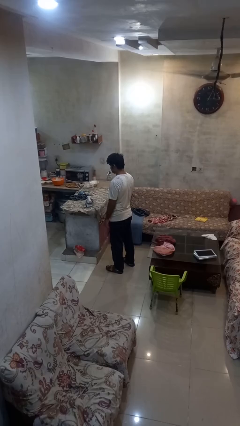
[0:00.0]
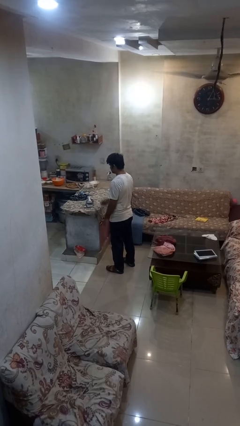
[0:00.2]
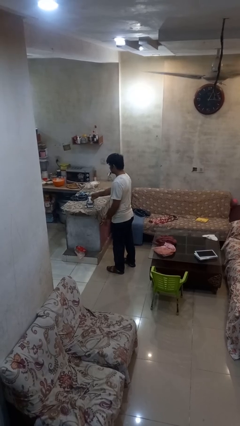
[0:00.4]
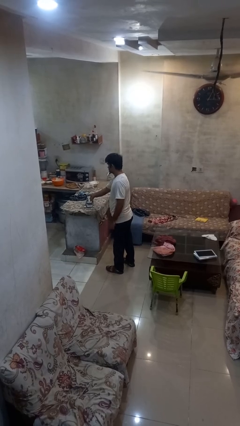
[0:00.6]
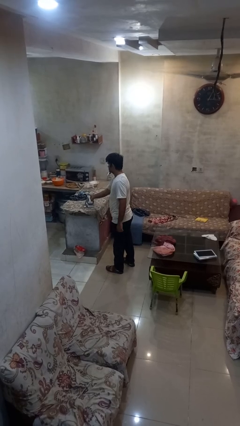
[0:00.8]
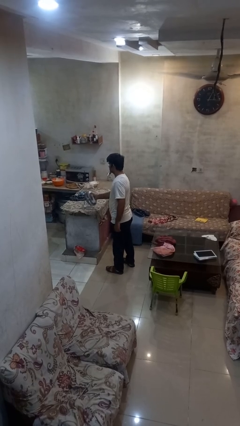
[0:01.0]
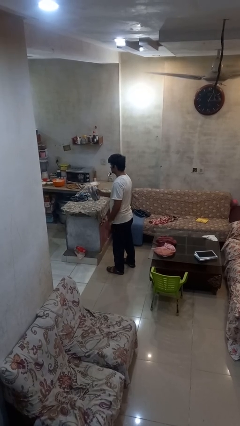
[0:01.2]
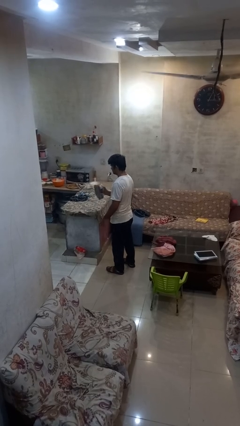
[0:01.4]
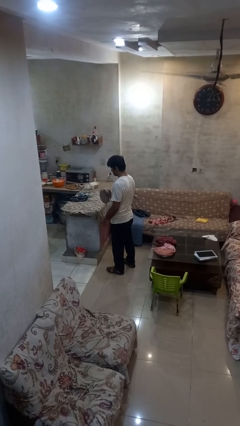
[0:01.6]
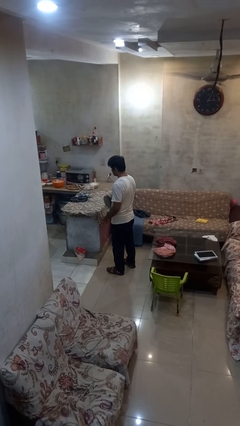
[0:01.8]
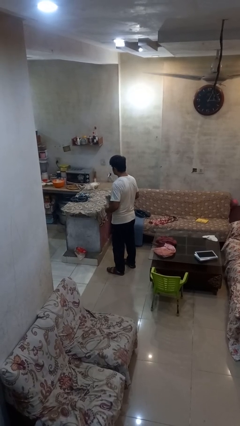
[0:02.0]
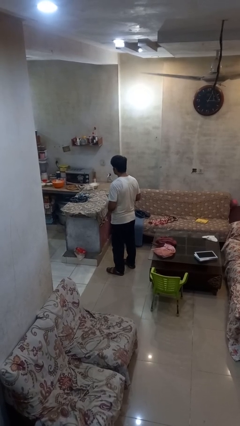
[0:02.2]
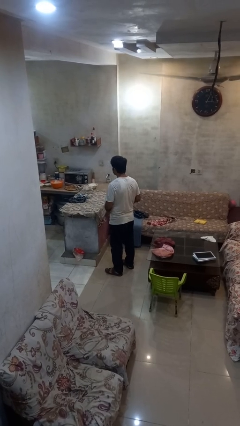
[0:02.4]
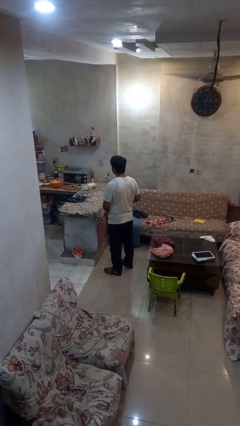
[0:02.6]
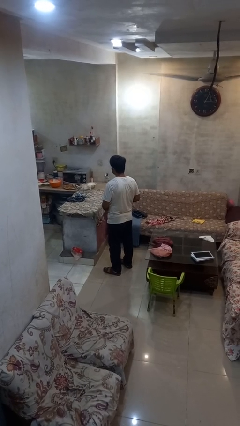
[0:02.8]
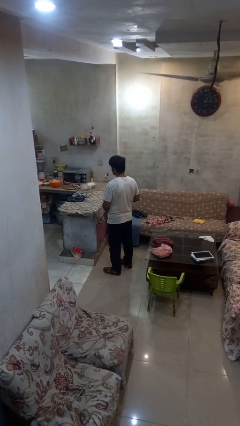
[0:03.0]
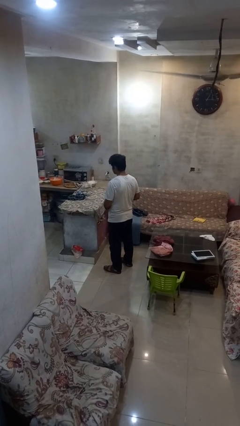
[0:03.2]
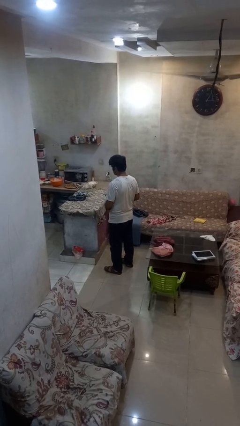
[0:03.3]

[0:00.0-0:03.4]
person picks up object from countertop

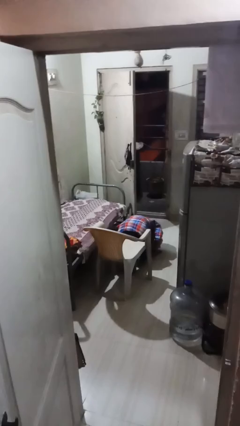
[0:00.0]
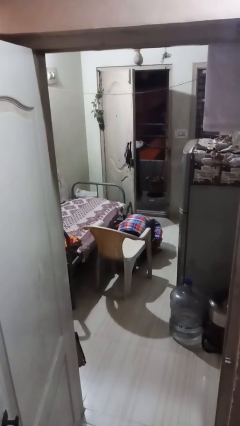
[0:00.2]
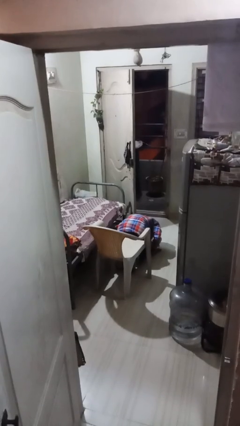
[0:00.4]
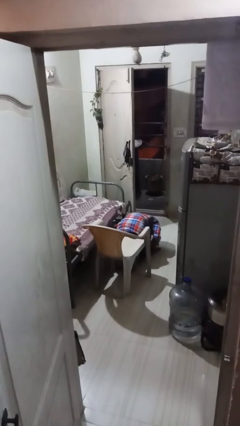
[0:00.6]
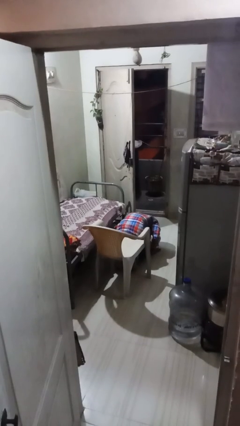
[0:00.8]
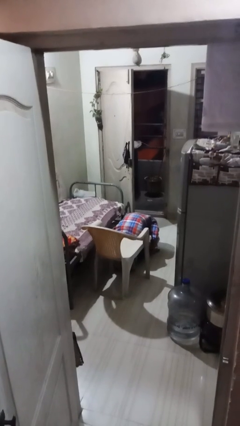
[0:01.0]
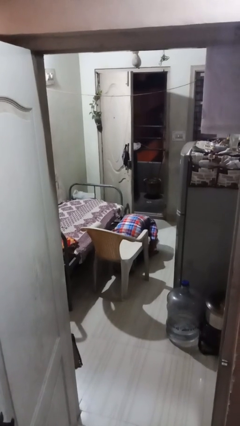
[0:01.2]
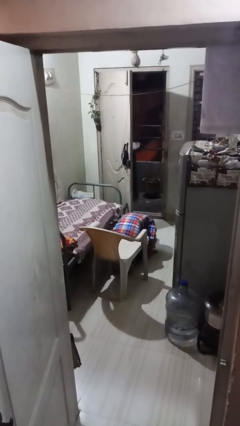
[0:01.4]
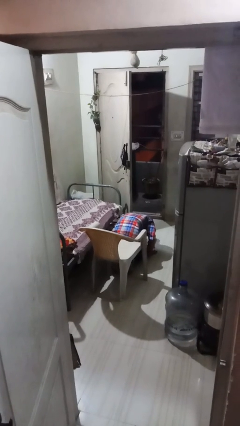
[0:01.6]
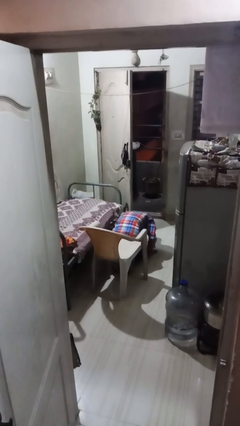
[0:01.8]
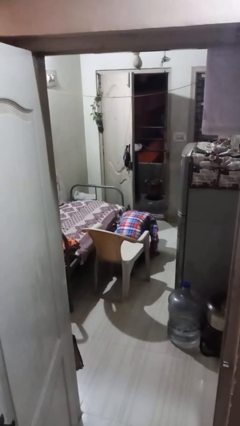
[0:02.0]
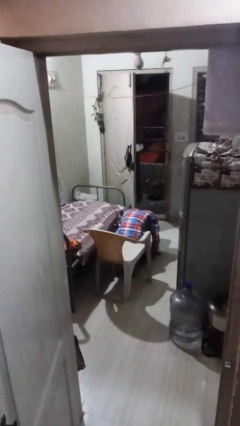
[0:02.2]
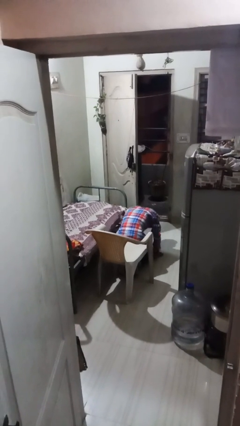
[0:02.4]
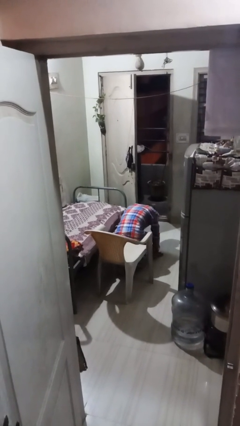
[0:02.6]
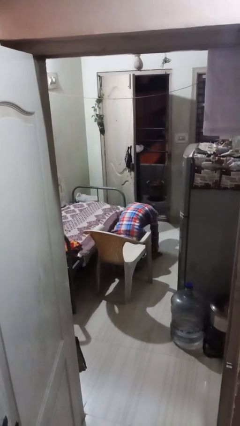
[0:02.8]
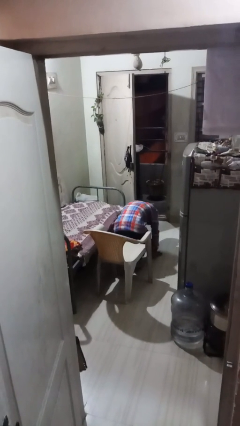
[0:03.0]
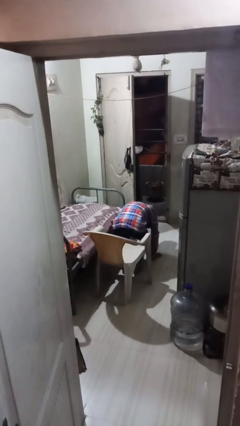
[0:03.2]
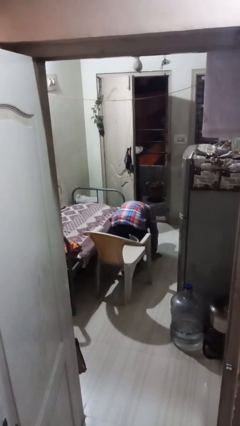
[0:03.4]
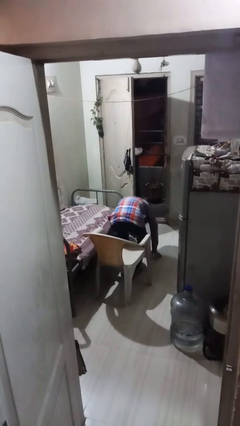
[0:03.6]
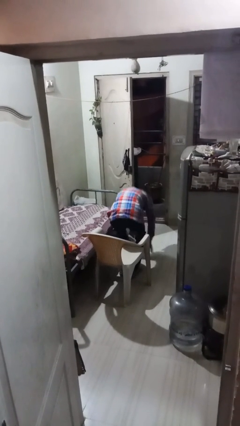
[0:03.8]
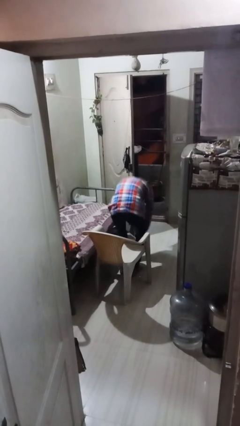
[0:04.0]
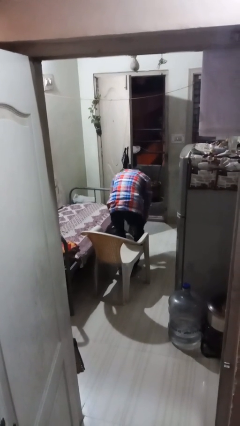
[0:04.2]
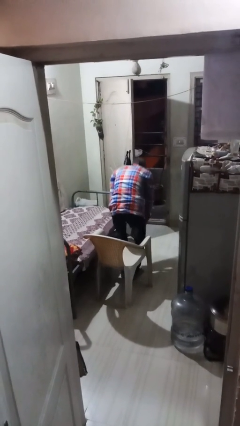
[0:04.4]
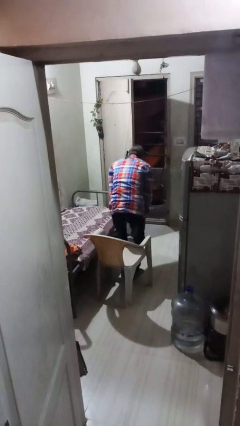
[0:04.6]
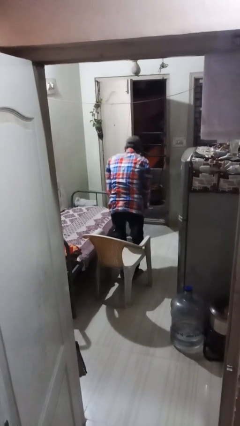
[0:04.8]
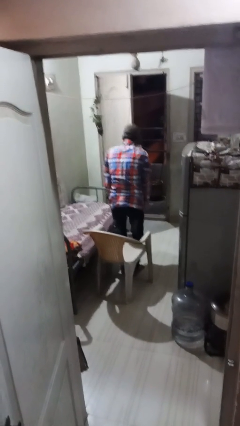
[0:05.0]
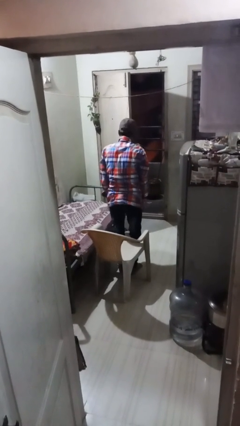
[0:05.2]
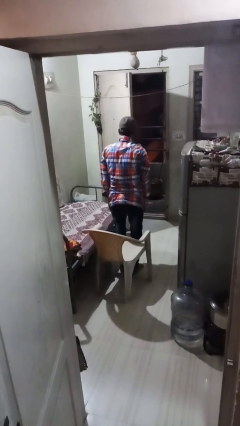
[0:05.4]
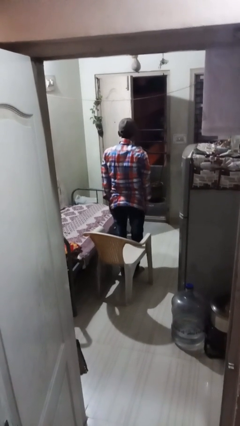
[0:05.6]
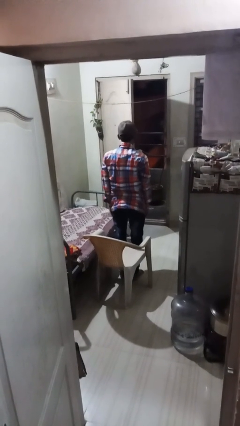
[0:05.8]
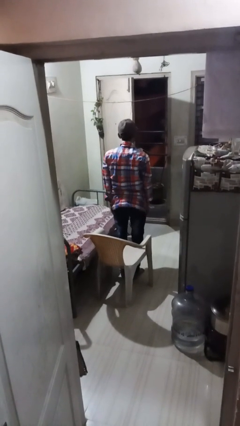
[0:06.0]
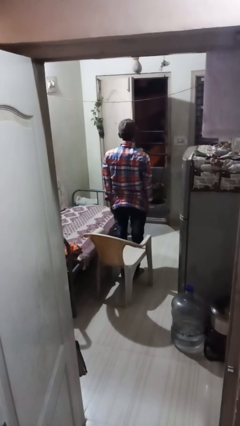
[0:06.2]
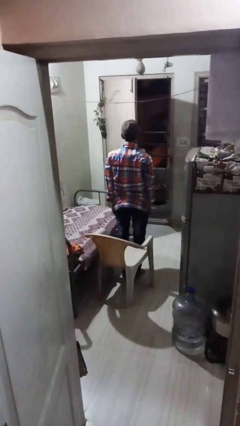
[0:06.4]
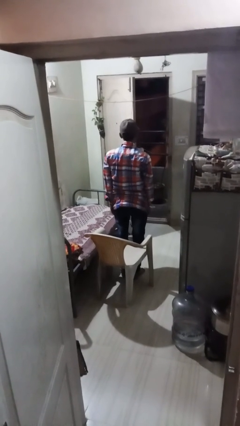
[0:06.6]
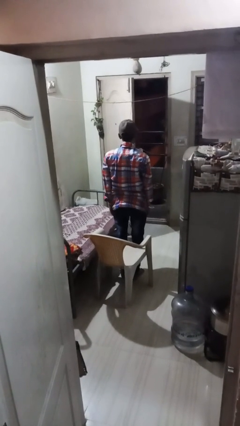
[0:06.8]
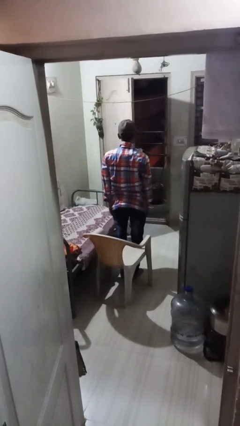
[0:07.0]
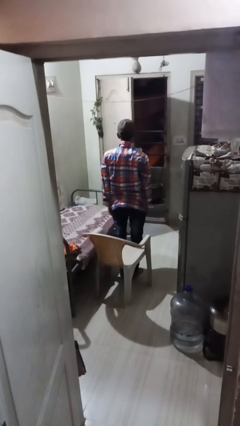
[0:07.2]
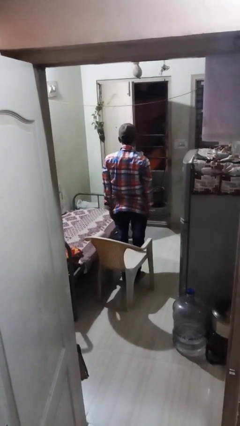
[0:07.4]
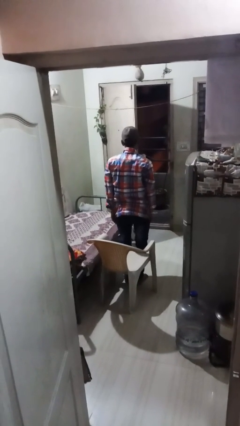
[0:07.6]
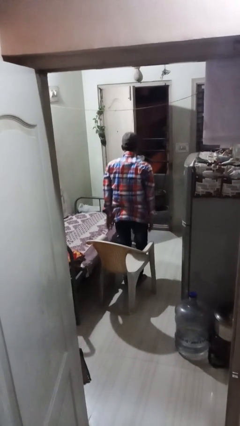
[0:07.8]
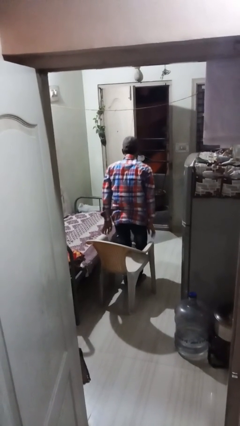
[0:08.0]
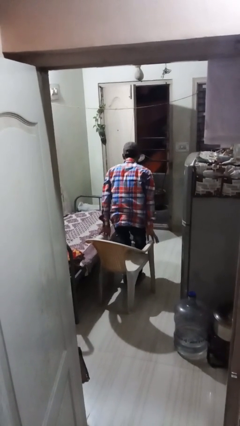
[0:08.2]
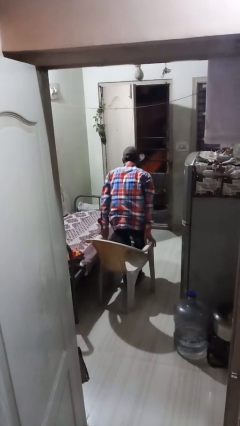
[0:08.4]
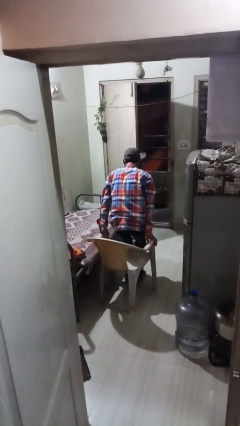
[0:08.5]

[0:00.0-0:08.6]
person stands up from floor

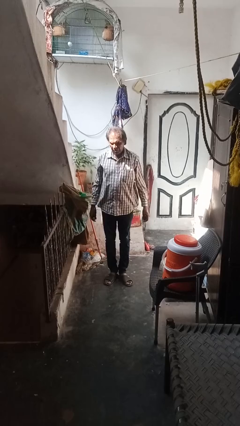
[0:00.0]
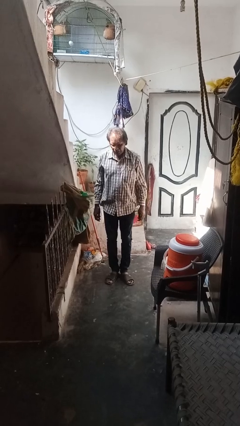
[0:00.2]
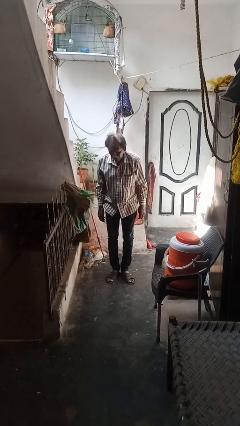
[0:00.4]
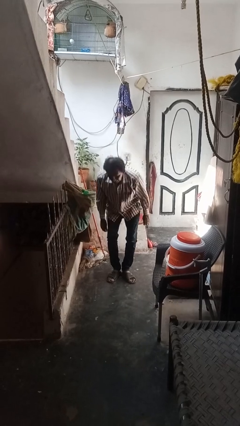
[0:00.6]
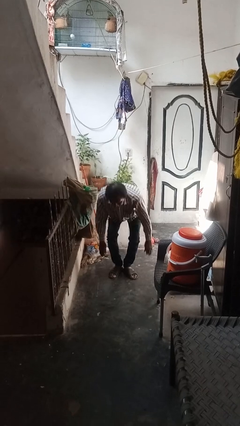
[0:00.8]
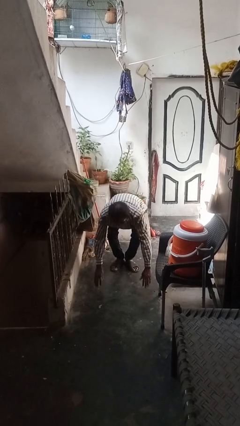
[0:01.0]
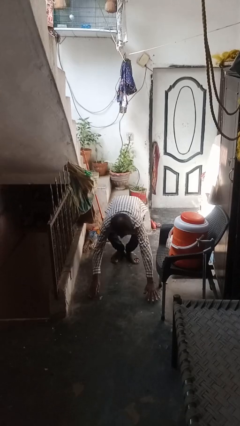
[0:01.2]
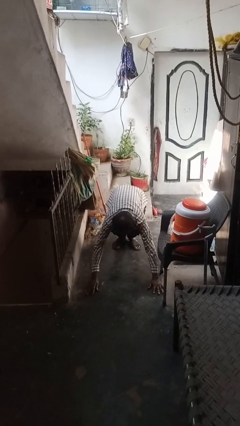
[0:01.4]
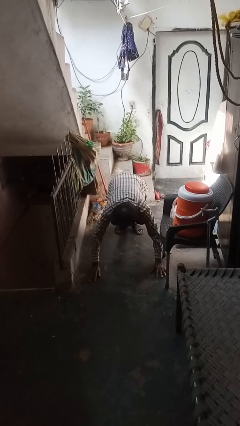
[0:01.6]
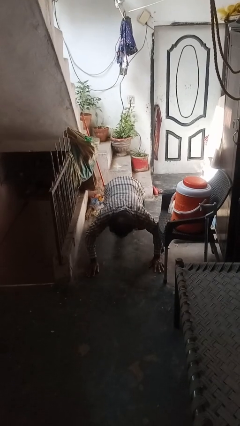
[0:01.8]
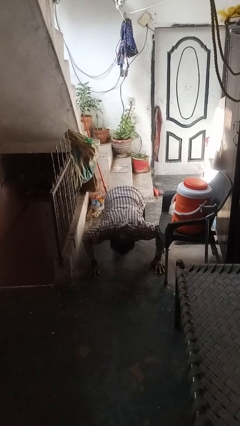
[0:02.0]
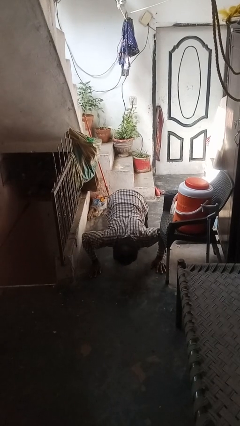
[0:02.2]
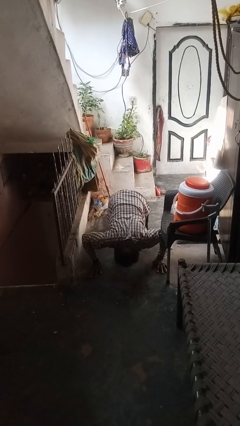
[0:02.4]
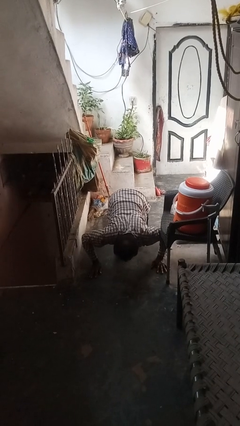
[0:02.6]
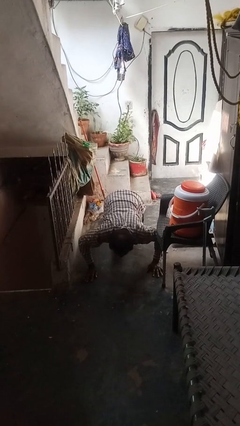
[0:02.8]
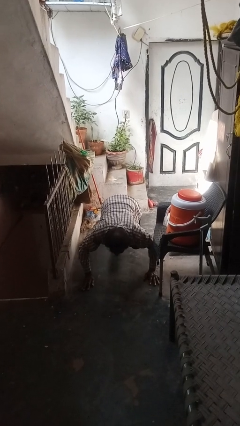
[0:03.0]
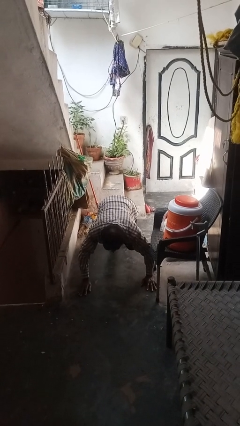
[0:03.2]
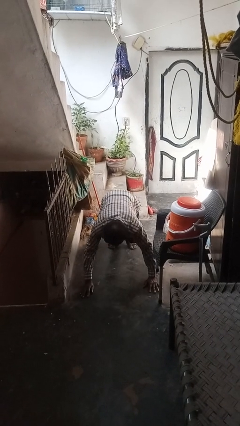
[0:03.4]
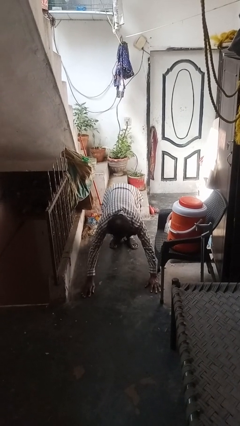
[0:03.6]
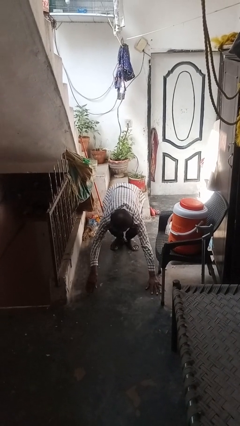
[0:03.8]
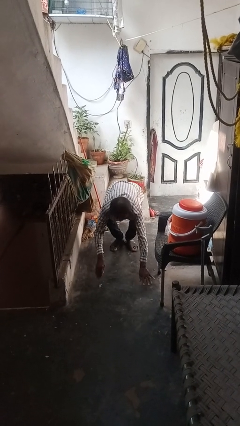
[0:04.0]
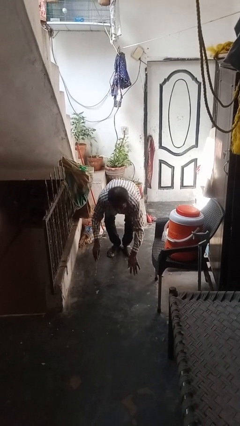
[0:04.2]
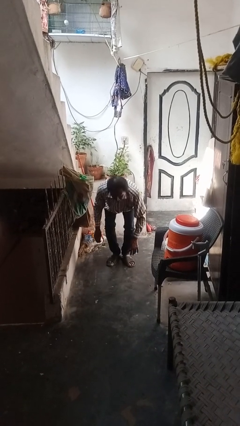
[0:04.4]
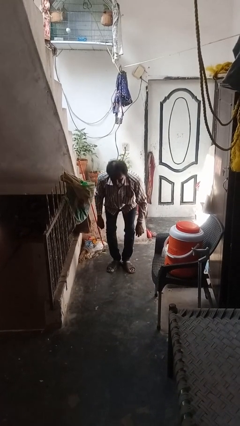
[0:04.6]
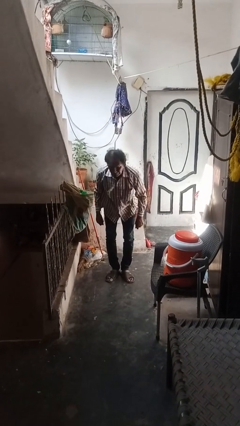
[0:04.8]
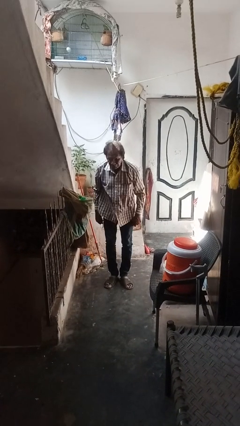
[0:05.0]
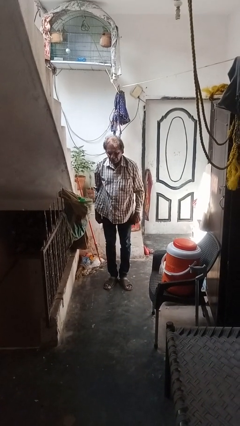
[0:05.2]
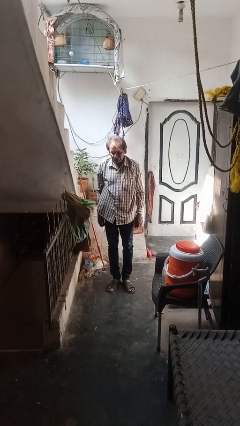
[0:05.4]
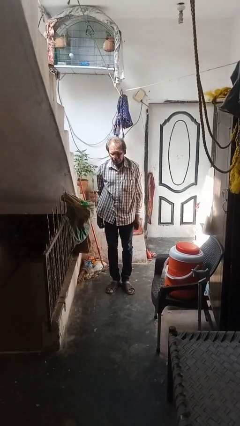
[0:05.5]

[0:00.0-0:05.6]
person exercises with pushup

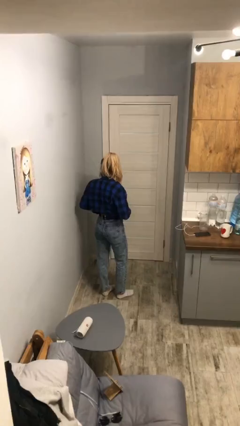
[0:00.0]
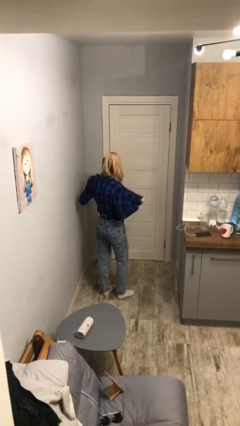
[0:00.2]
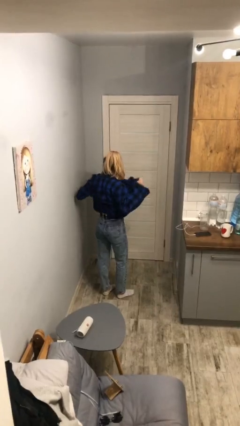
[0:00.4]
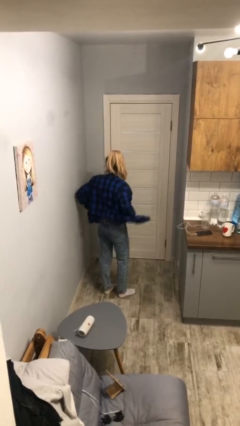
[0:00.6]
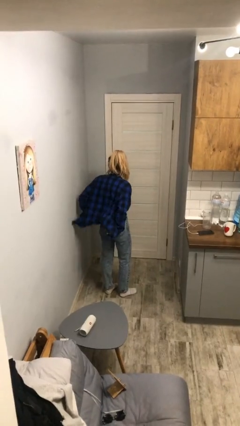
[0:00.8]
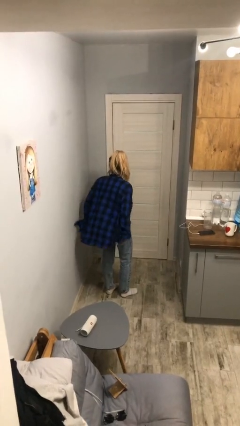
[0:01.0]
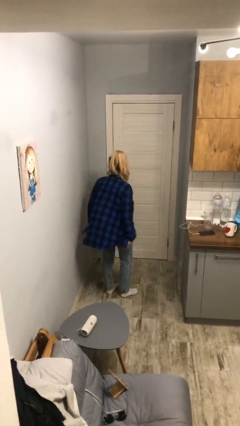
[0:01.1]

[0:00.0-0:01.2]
person untucks shirt
